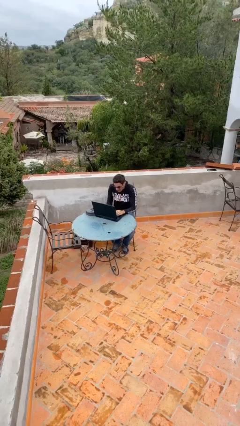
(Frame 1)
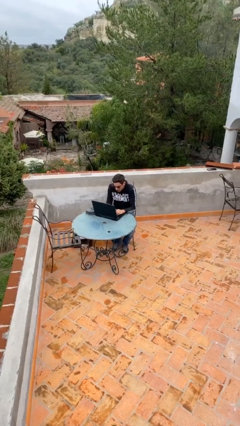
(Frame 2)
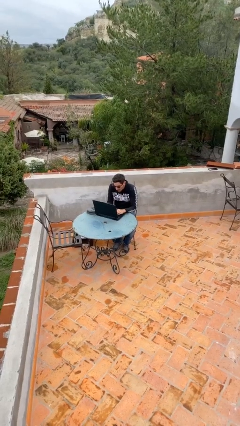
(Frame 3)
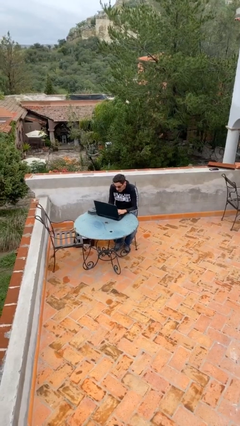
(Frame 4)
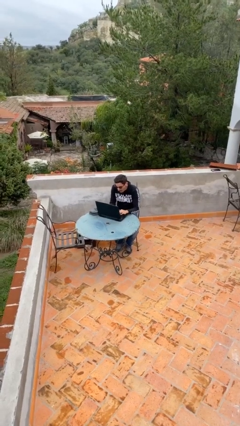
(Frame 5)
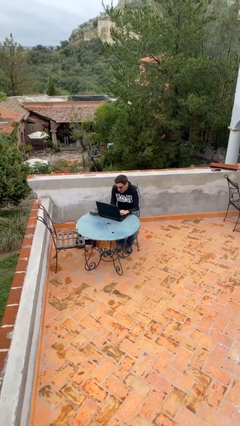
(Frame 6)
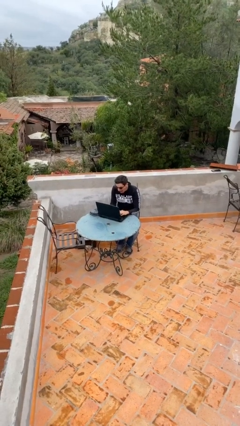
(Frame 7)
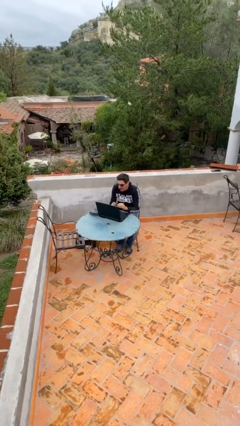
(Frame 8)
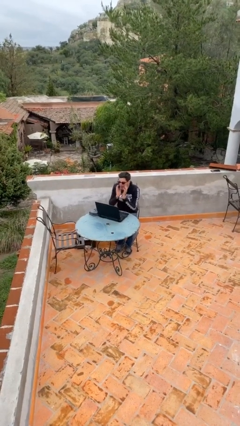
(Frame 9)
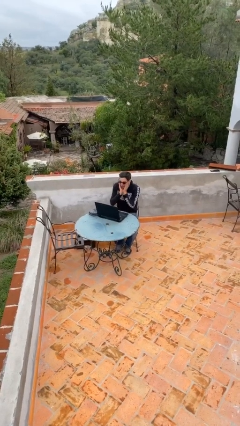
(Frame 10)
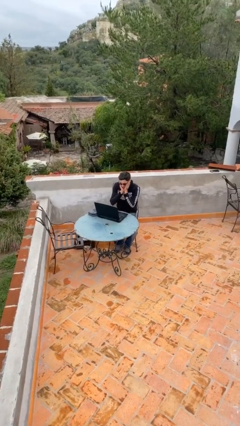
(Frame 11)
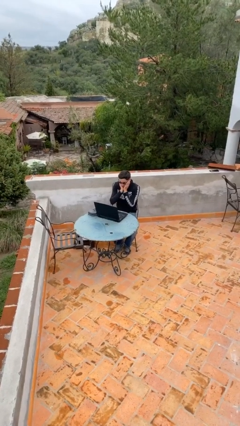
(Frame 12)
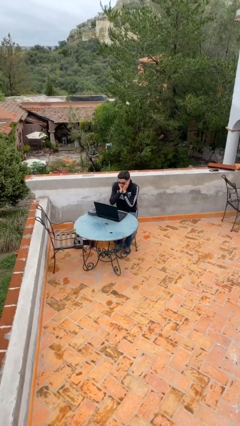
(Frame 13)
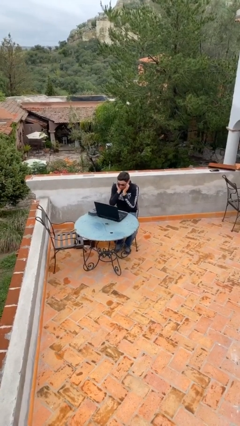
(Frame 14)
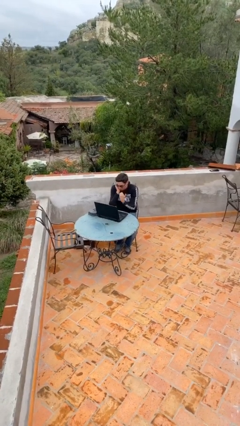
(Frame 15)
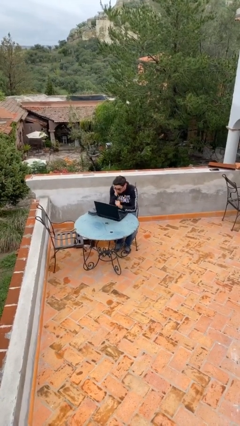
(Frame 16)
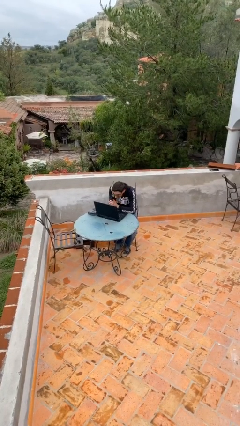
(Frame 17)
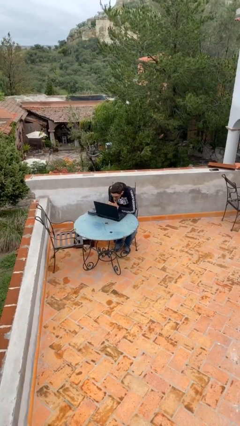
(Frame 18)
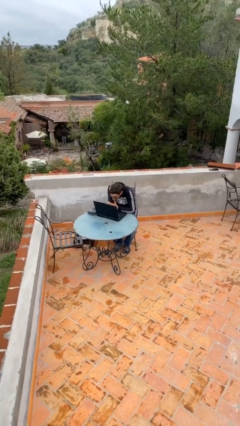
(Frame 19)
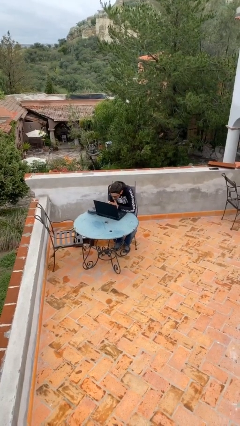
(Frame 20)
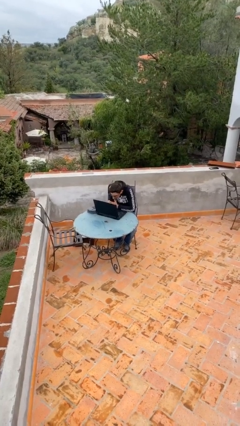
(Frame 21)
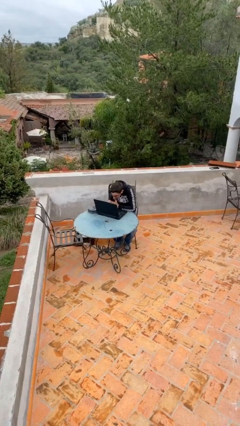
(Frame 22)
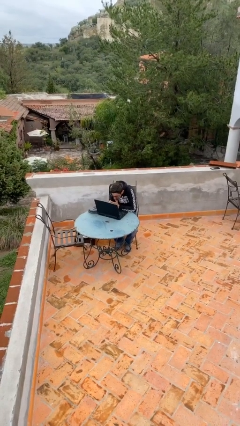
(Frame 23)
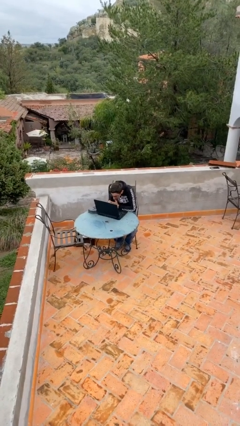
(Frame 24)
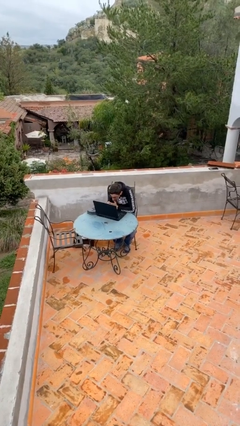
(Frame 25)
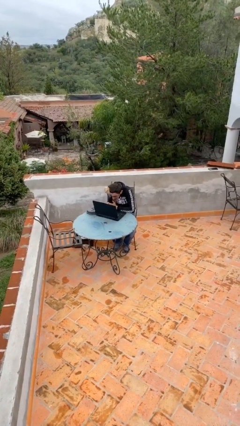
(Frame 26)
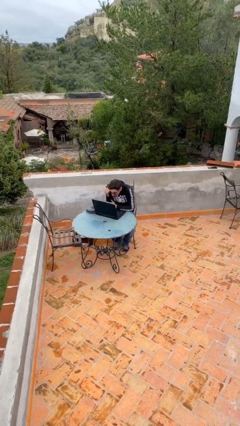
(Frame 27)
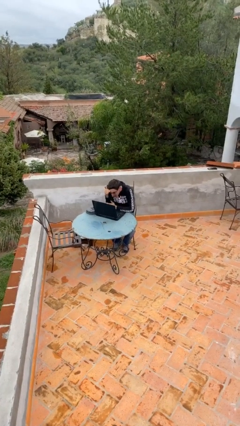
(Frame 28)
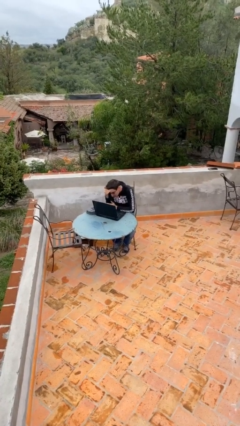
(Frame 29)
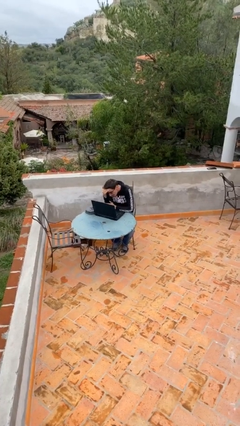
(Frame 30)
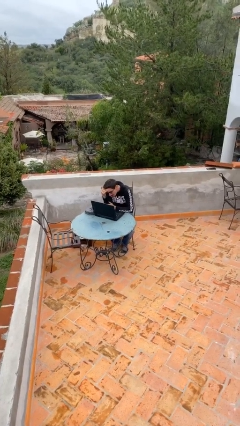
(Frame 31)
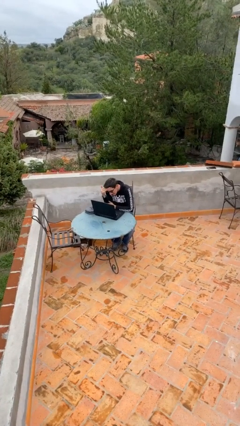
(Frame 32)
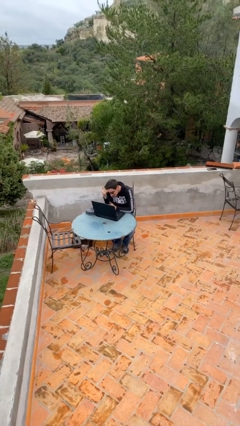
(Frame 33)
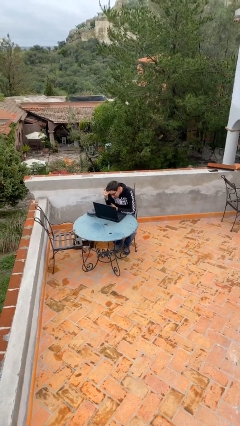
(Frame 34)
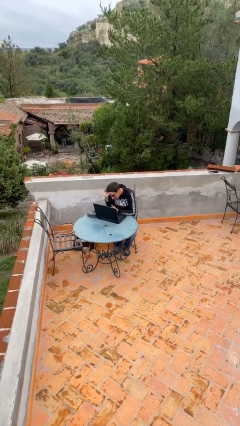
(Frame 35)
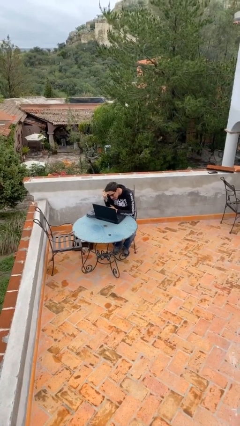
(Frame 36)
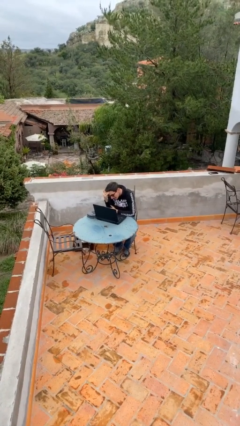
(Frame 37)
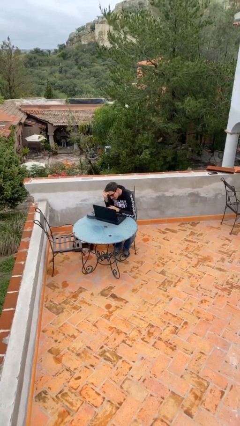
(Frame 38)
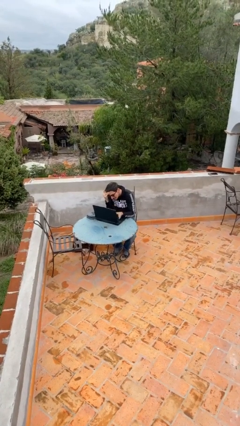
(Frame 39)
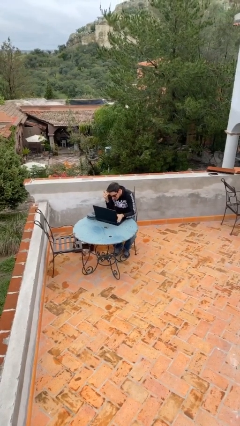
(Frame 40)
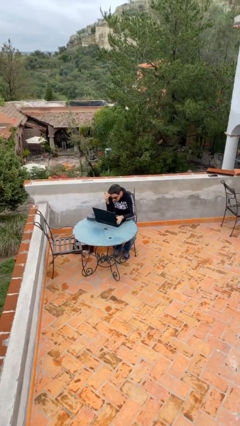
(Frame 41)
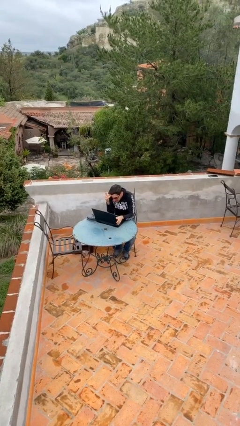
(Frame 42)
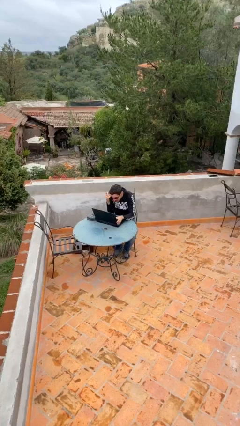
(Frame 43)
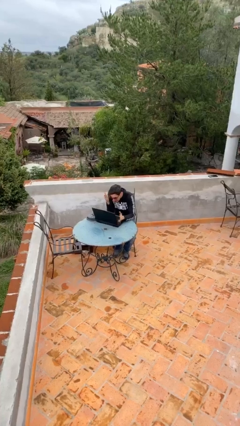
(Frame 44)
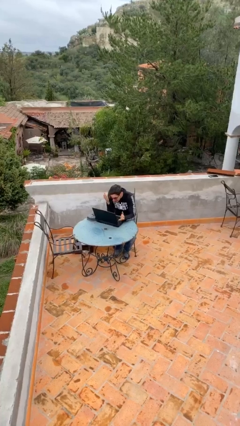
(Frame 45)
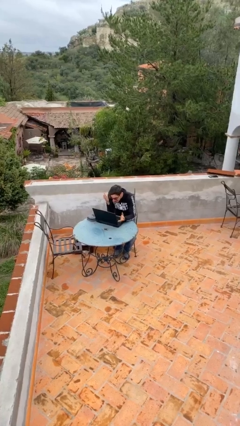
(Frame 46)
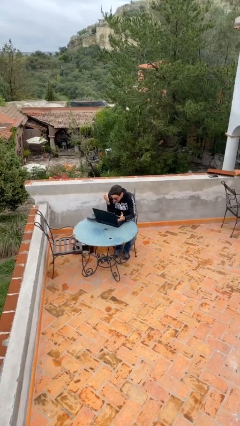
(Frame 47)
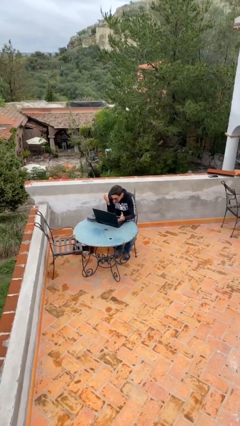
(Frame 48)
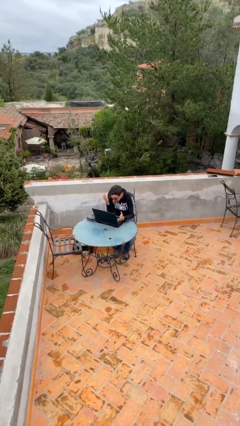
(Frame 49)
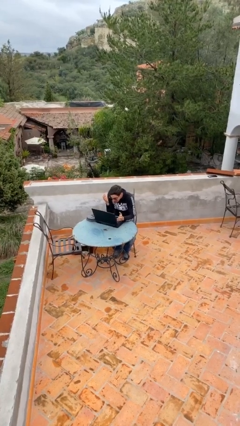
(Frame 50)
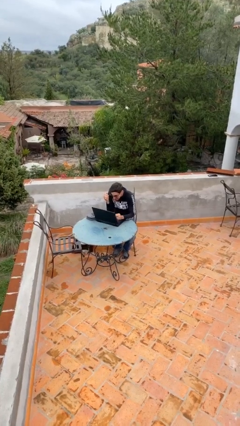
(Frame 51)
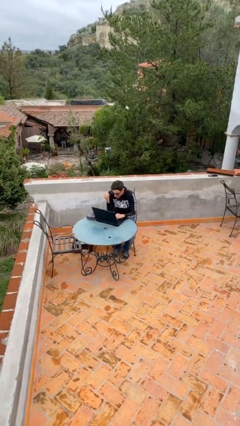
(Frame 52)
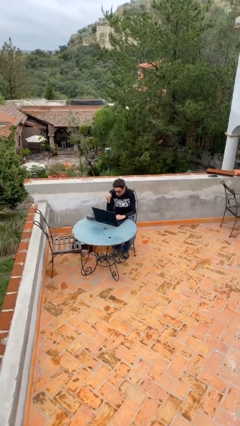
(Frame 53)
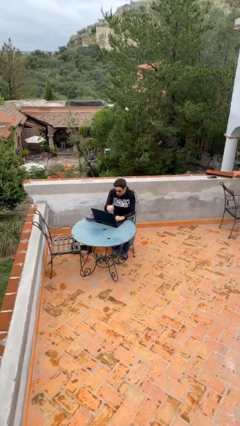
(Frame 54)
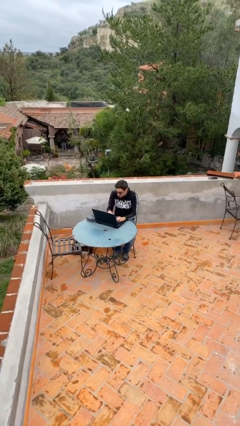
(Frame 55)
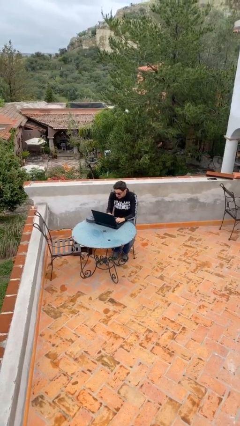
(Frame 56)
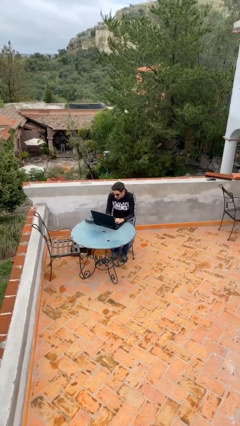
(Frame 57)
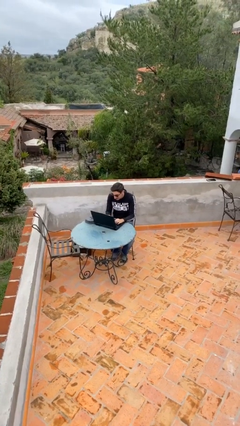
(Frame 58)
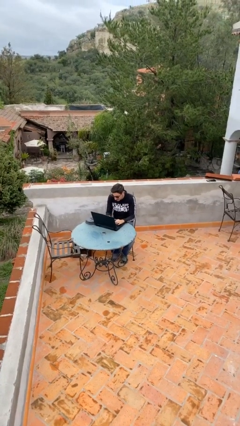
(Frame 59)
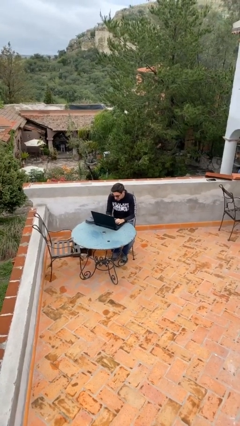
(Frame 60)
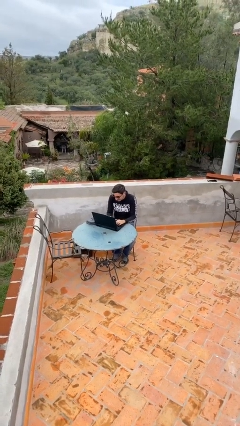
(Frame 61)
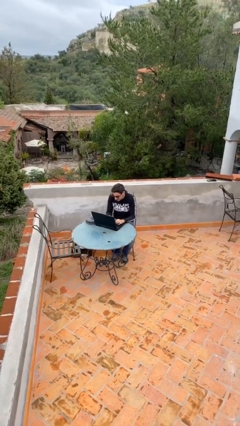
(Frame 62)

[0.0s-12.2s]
person interacts with laptop

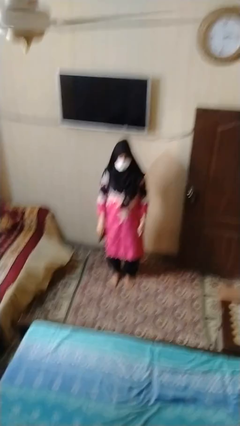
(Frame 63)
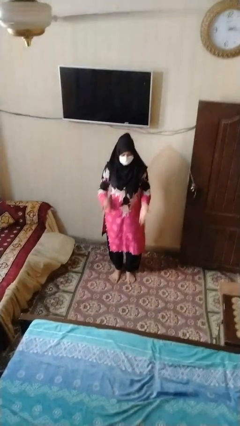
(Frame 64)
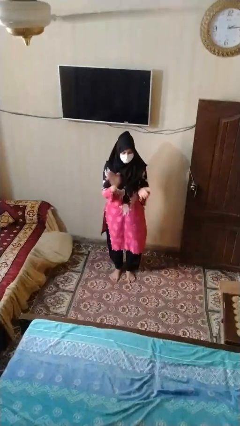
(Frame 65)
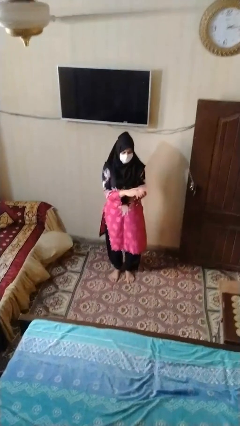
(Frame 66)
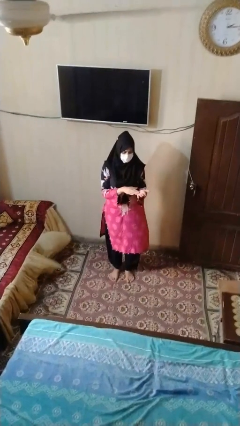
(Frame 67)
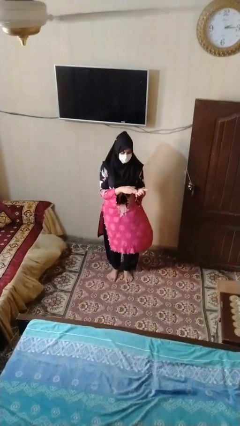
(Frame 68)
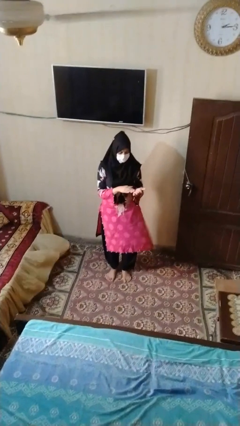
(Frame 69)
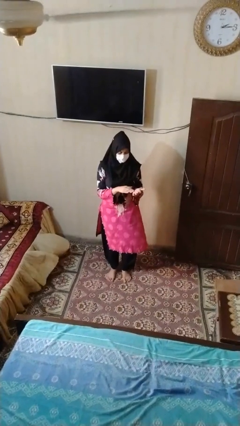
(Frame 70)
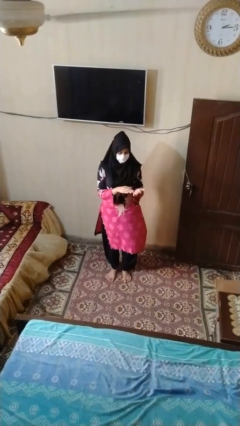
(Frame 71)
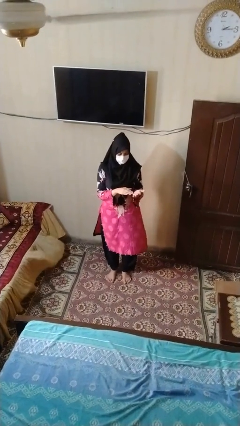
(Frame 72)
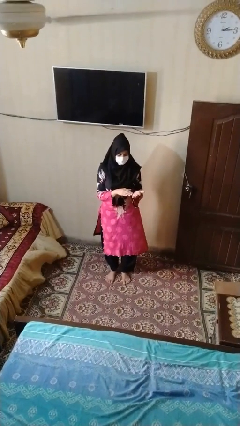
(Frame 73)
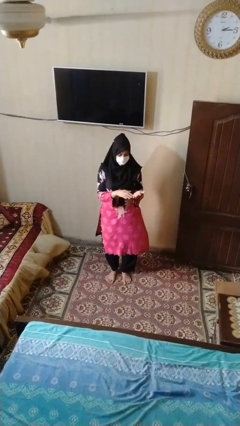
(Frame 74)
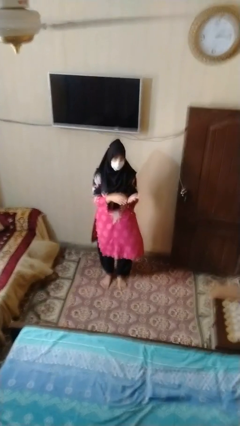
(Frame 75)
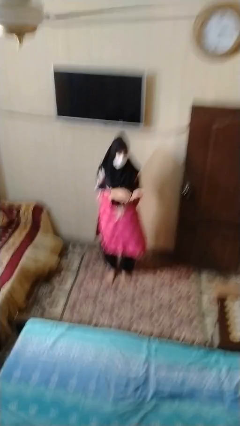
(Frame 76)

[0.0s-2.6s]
person opens jewelry box

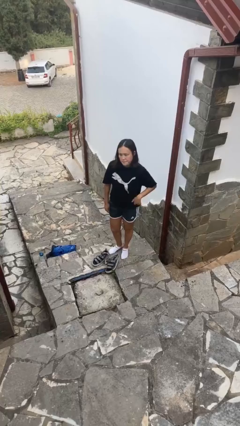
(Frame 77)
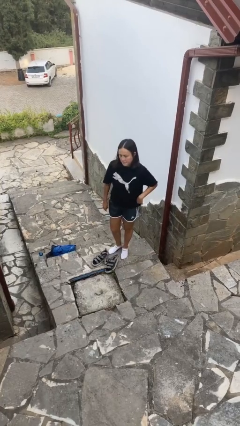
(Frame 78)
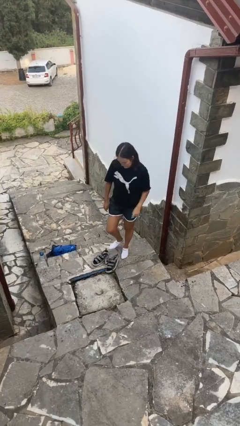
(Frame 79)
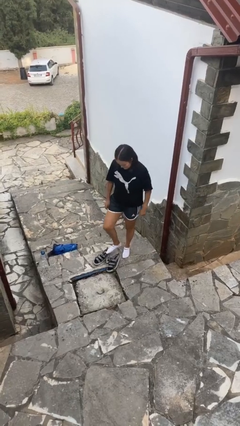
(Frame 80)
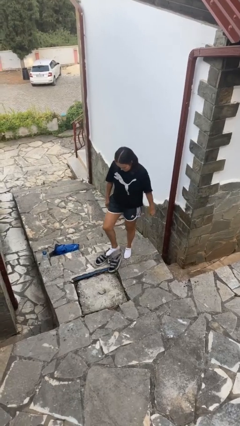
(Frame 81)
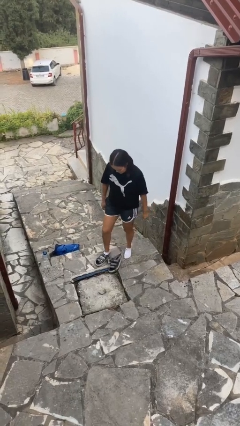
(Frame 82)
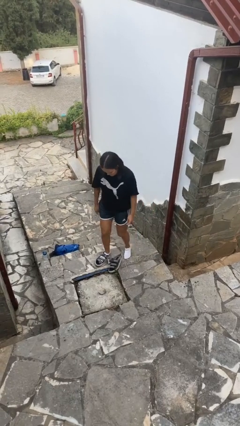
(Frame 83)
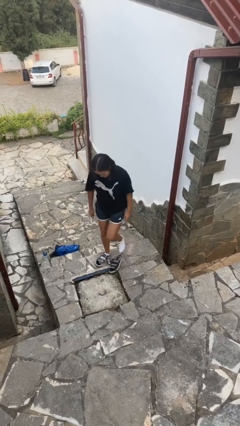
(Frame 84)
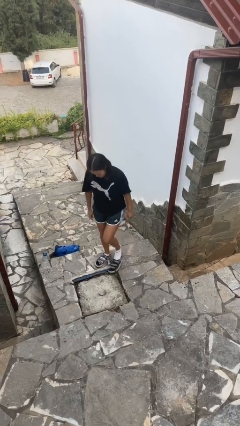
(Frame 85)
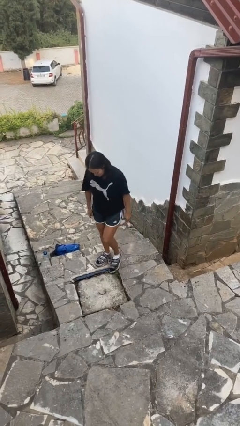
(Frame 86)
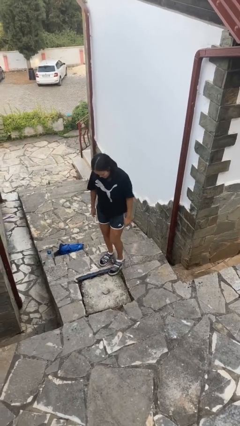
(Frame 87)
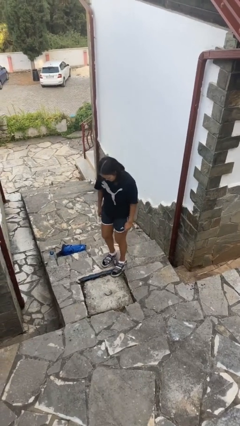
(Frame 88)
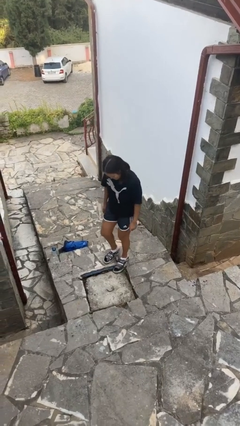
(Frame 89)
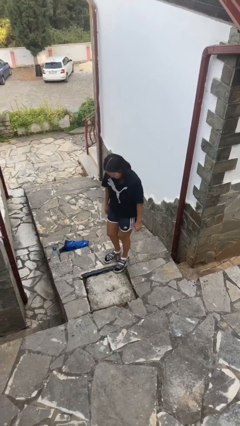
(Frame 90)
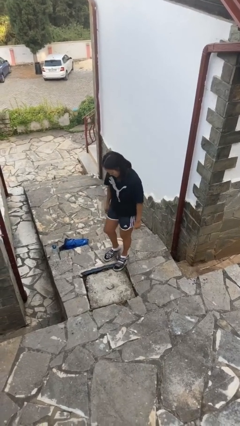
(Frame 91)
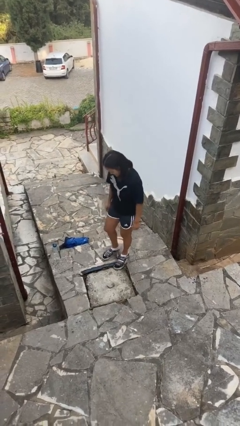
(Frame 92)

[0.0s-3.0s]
person puts on shoes
